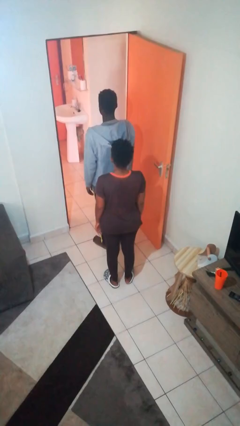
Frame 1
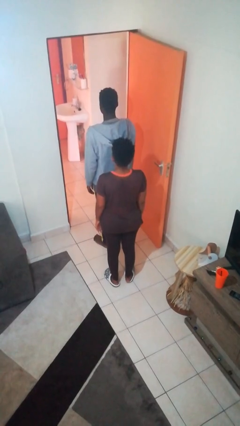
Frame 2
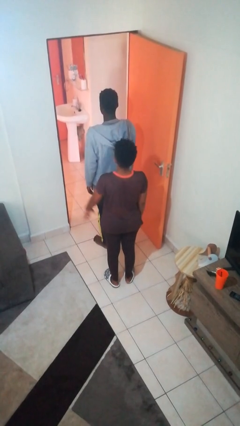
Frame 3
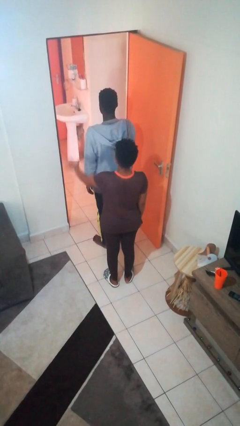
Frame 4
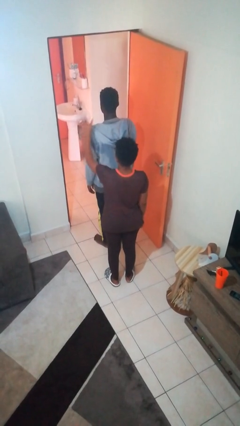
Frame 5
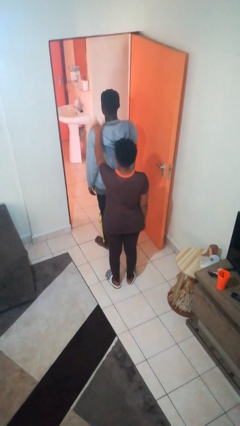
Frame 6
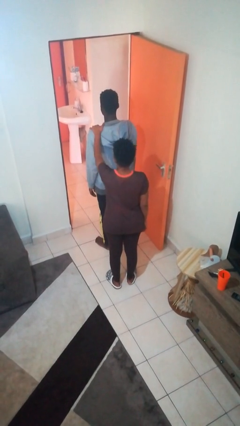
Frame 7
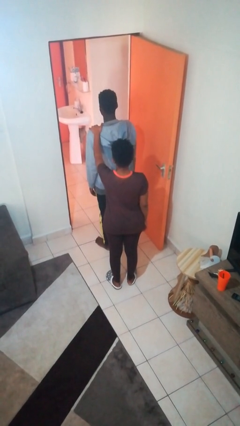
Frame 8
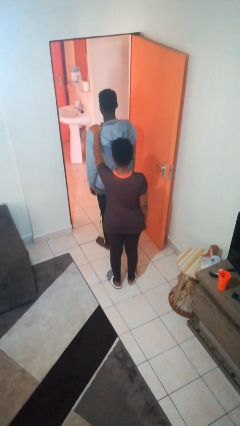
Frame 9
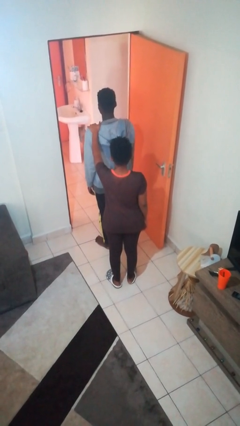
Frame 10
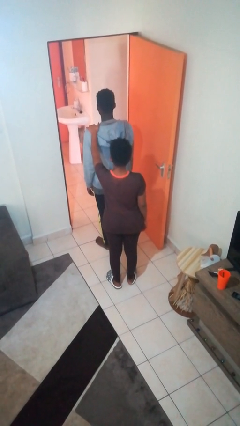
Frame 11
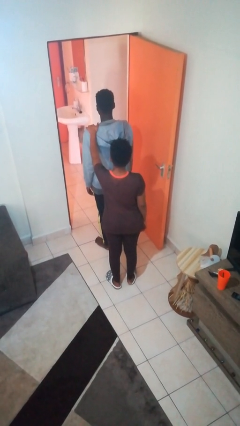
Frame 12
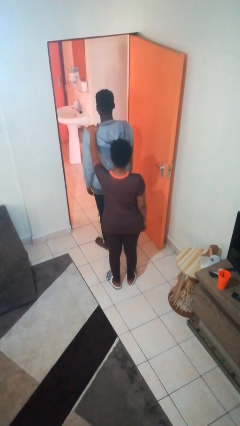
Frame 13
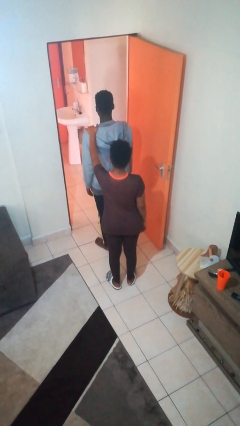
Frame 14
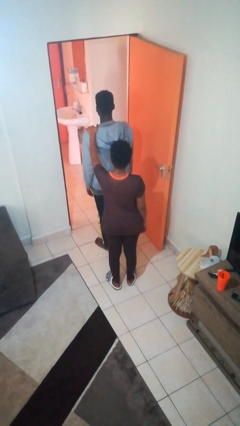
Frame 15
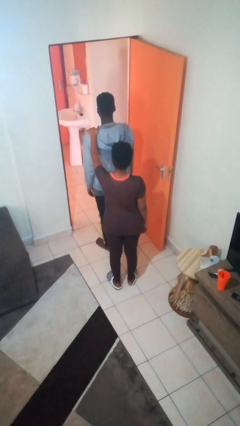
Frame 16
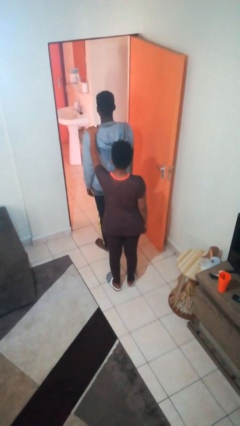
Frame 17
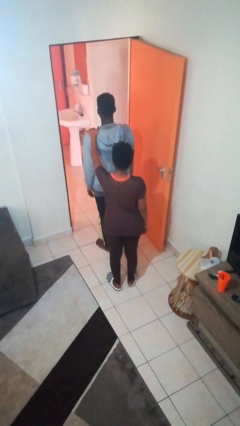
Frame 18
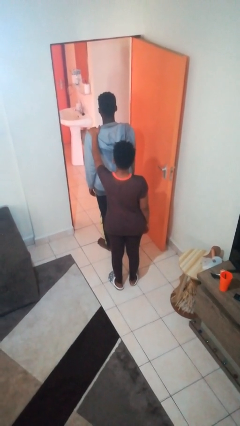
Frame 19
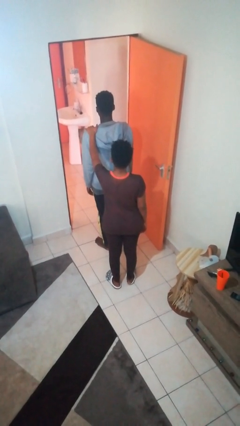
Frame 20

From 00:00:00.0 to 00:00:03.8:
person grabs person by shoulder

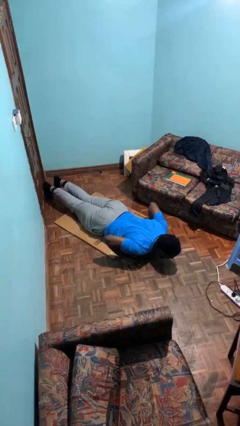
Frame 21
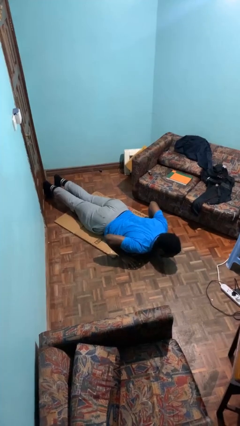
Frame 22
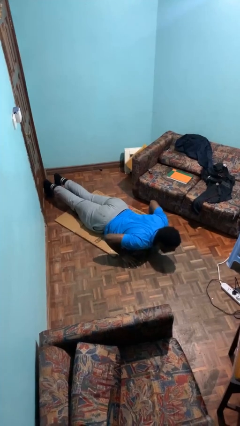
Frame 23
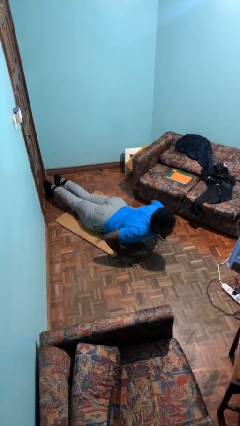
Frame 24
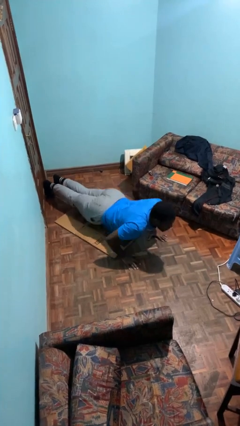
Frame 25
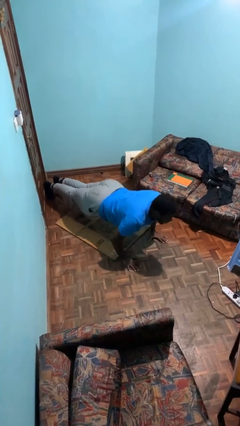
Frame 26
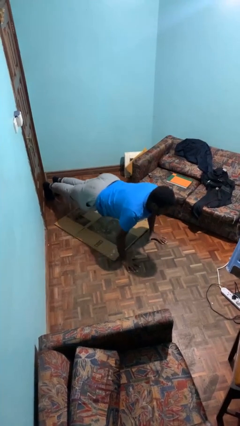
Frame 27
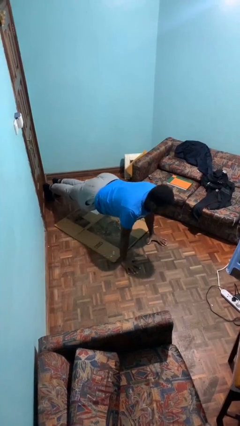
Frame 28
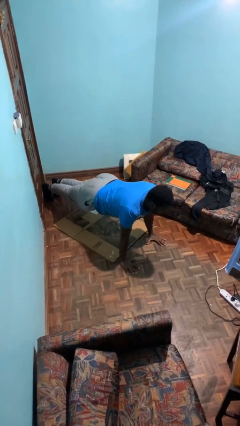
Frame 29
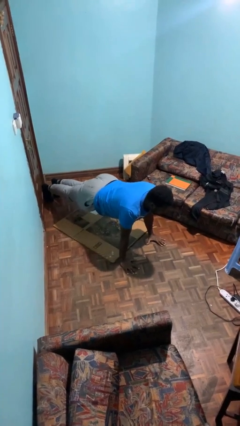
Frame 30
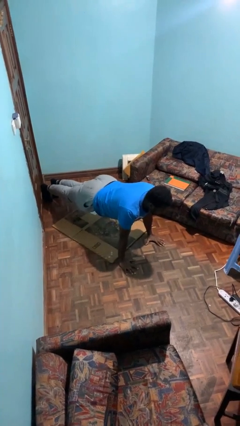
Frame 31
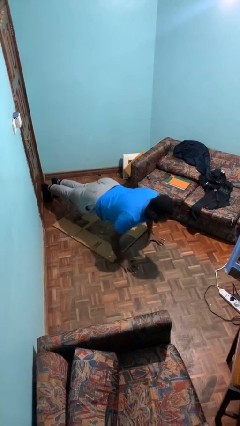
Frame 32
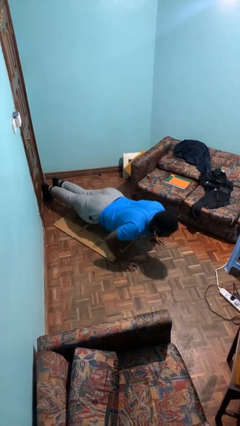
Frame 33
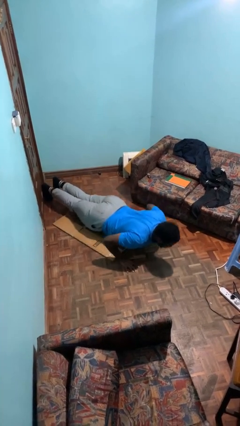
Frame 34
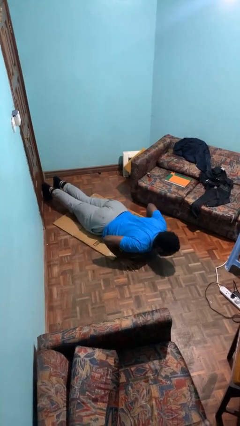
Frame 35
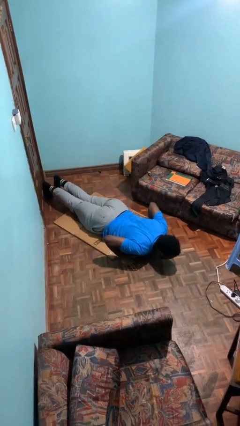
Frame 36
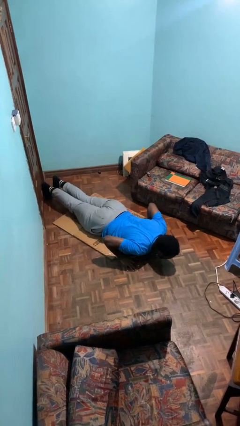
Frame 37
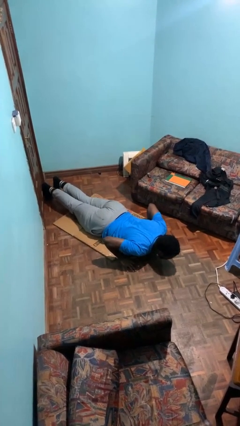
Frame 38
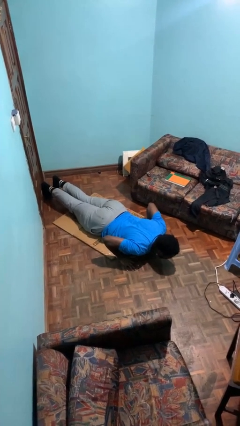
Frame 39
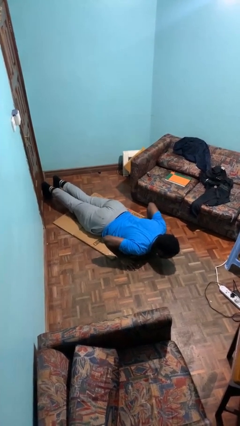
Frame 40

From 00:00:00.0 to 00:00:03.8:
person exercises with pushup

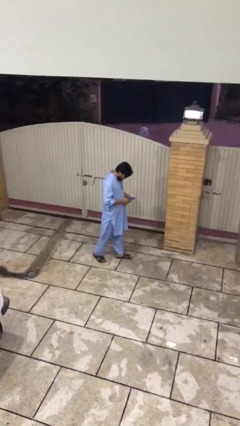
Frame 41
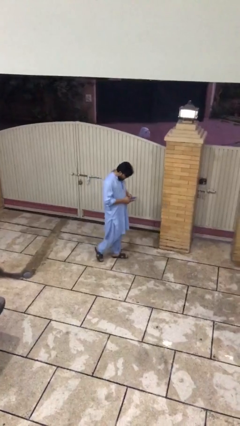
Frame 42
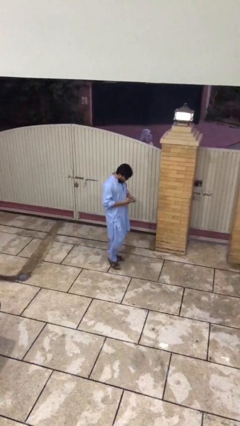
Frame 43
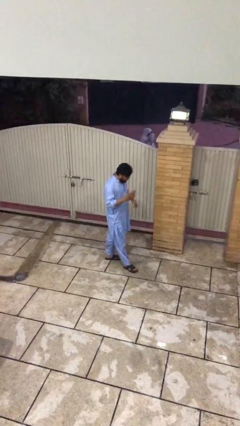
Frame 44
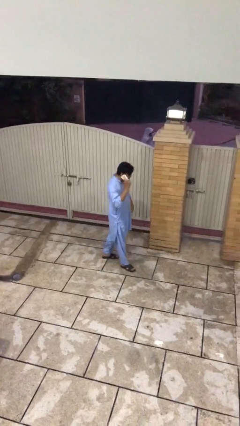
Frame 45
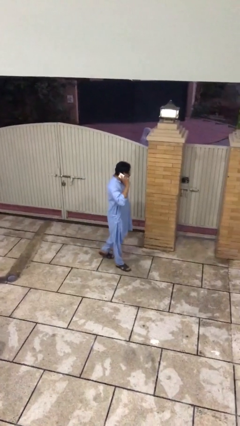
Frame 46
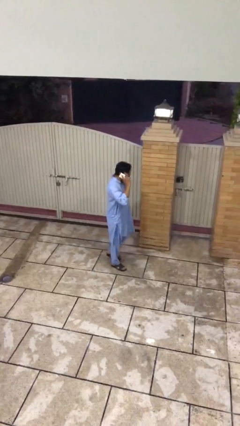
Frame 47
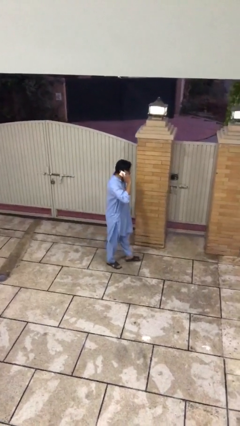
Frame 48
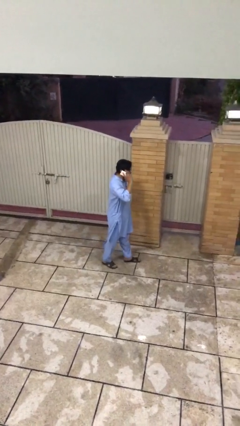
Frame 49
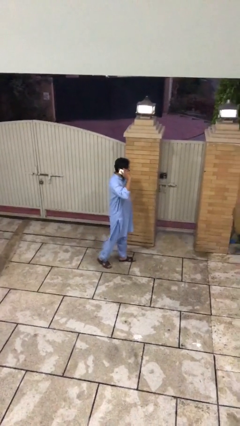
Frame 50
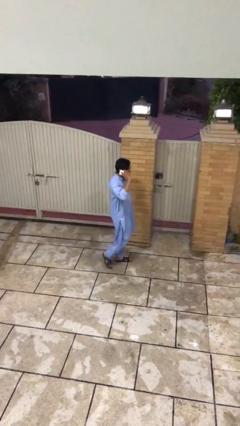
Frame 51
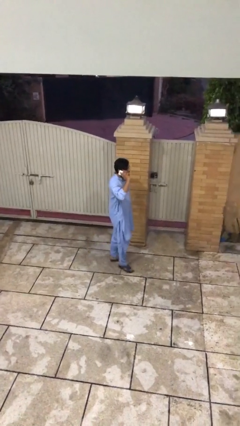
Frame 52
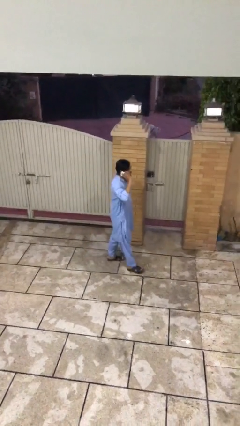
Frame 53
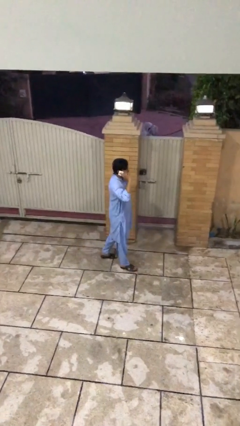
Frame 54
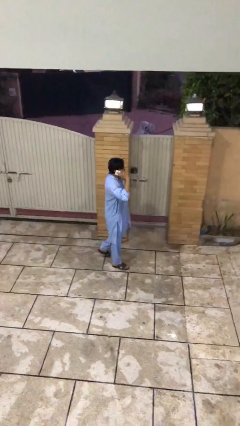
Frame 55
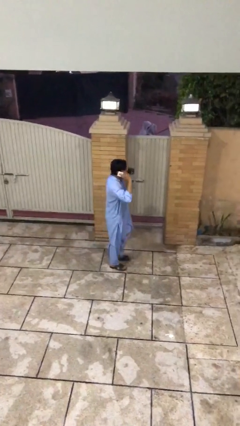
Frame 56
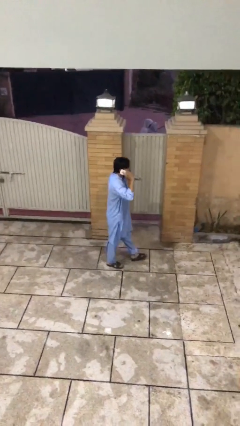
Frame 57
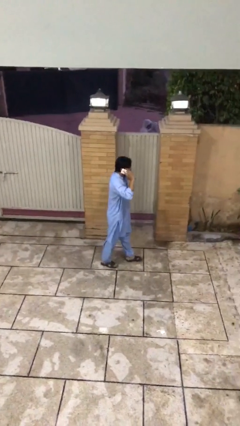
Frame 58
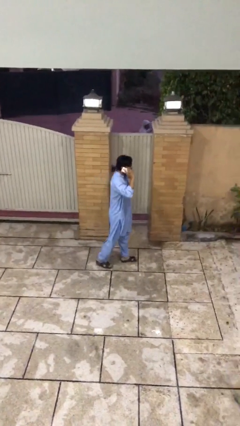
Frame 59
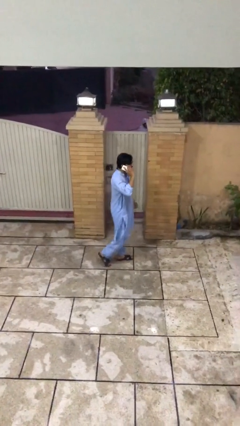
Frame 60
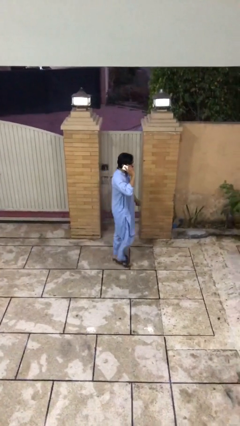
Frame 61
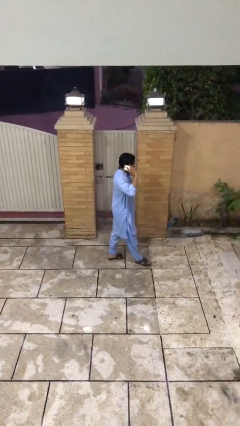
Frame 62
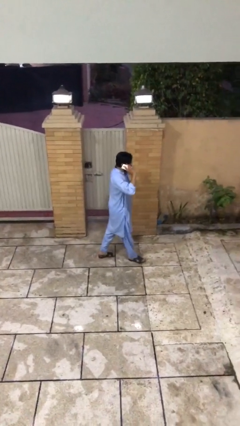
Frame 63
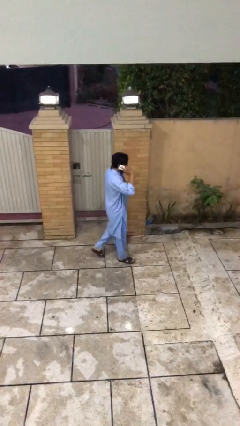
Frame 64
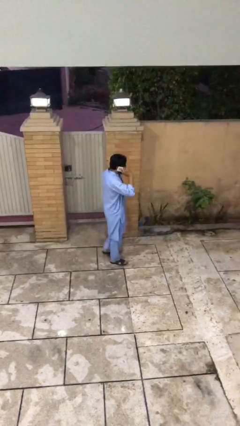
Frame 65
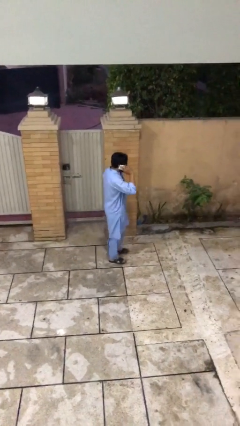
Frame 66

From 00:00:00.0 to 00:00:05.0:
person talks on phone

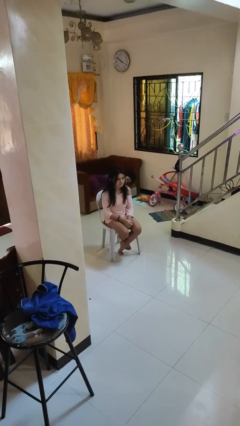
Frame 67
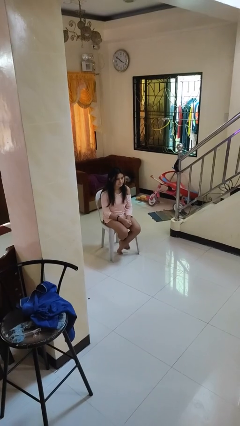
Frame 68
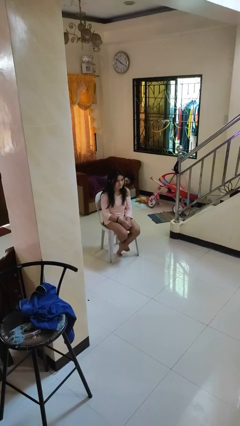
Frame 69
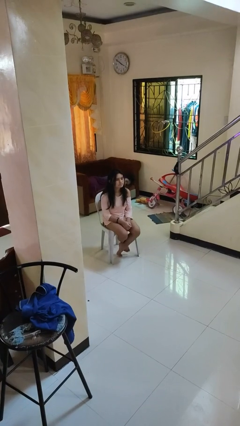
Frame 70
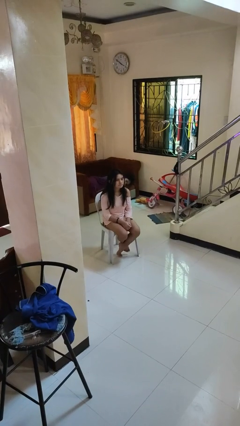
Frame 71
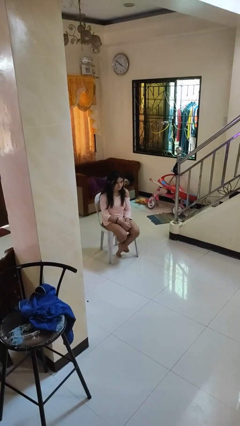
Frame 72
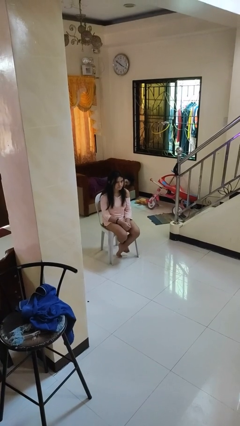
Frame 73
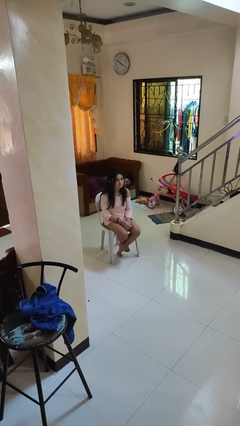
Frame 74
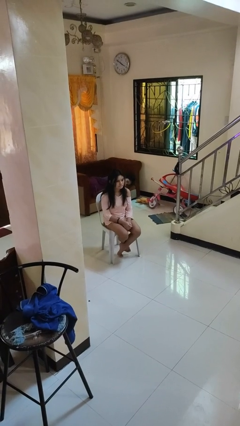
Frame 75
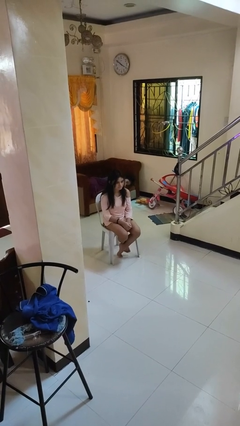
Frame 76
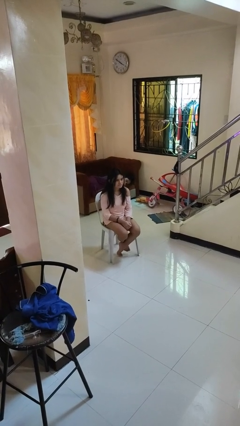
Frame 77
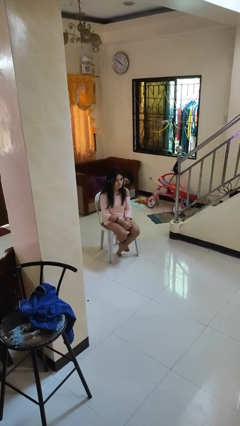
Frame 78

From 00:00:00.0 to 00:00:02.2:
person nods head

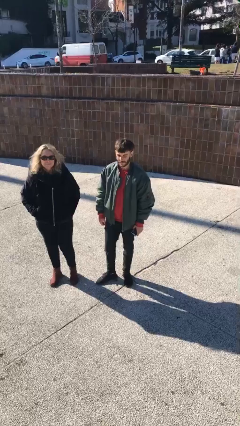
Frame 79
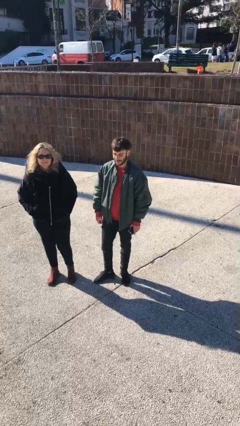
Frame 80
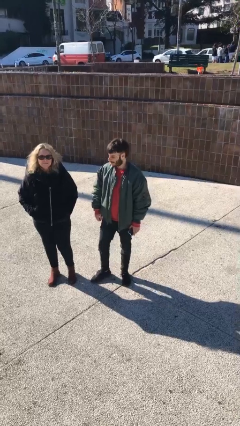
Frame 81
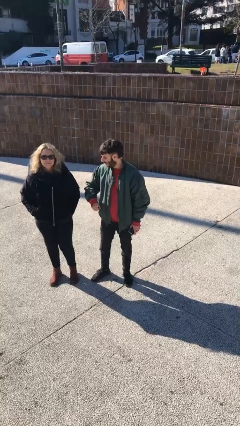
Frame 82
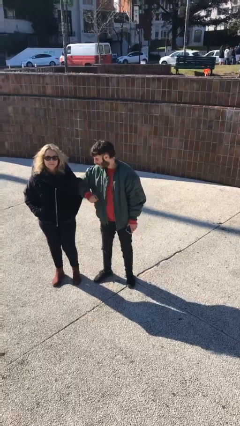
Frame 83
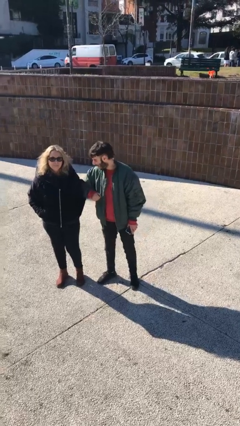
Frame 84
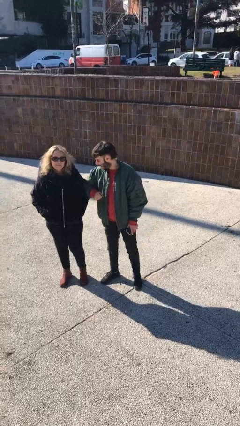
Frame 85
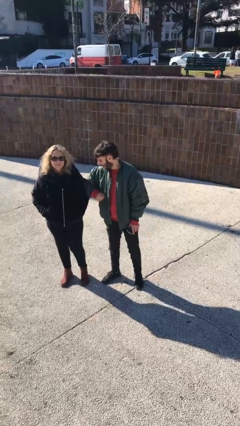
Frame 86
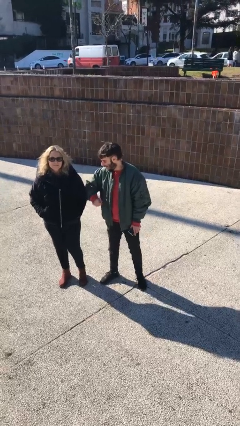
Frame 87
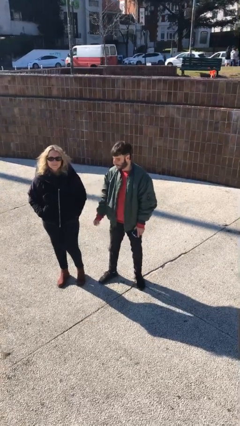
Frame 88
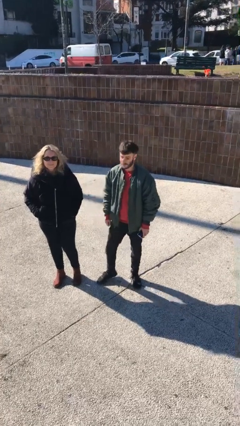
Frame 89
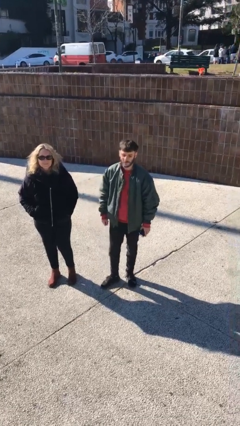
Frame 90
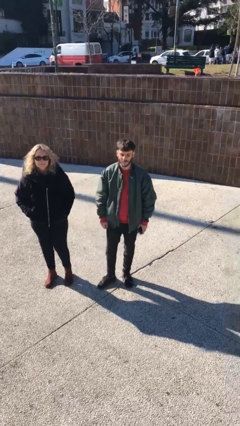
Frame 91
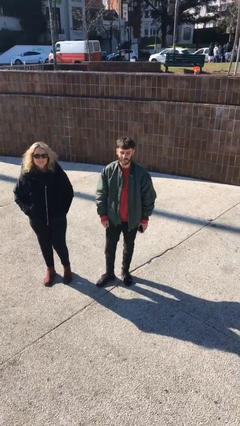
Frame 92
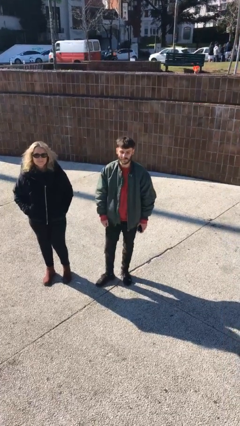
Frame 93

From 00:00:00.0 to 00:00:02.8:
person nudges person with elbow
